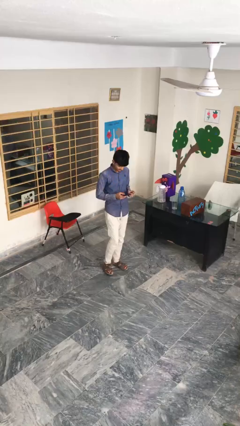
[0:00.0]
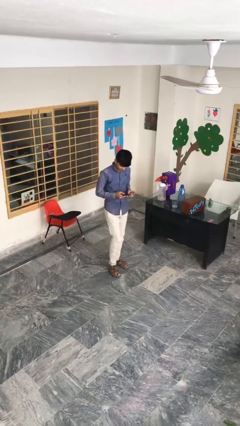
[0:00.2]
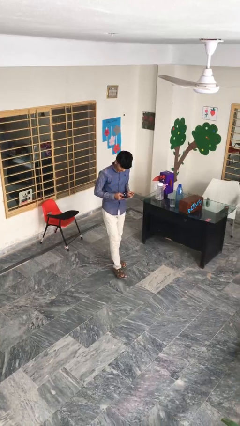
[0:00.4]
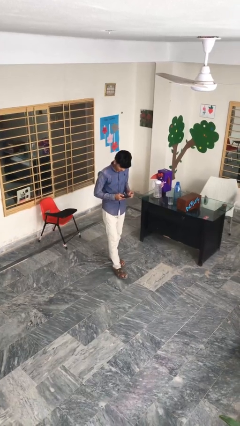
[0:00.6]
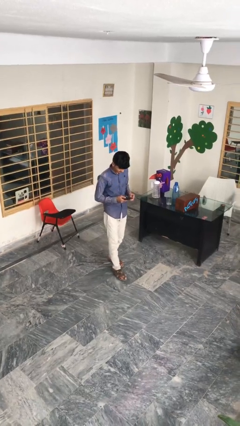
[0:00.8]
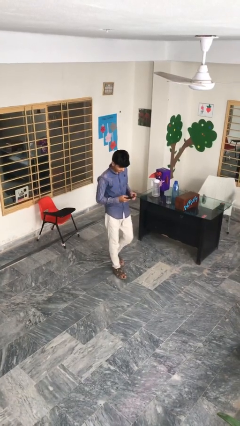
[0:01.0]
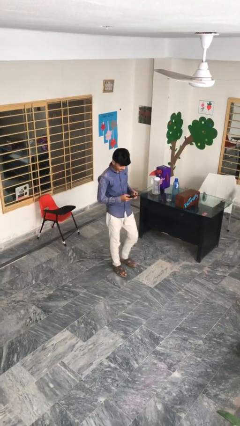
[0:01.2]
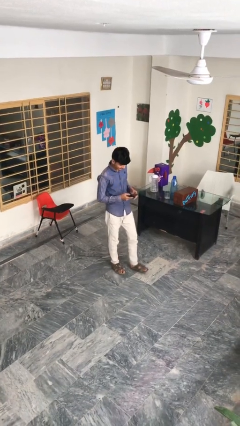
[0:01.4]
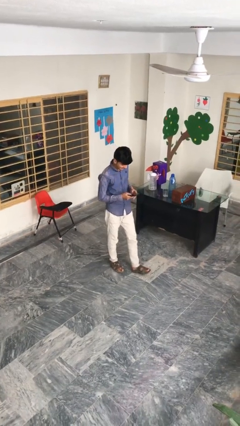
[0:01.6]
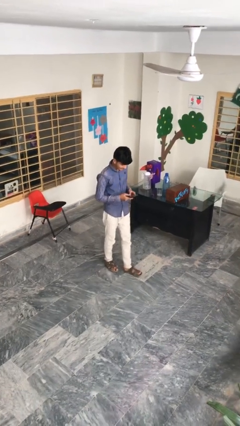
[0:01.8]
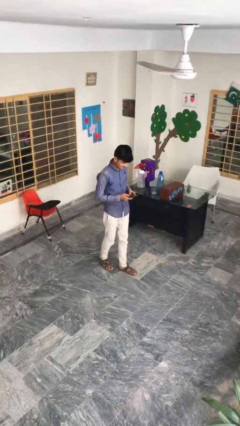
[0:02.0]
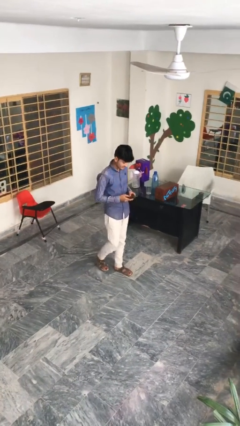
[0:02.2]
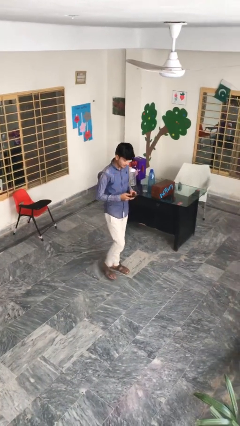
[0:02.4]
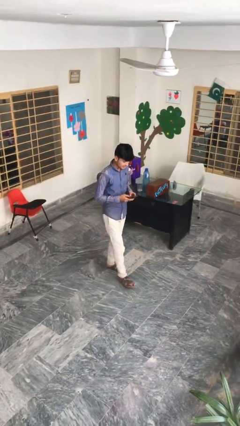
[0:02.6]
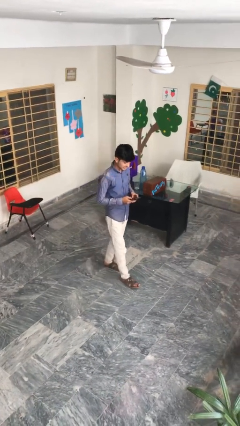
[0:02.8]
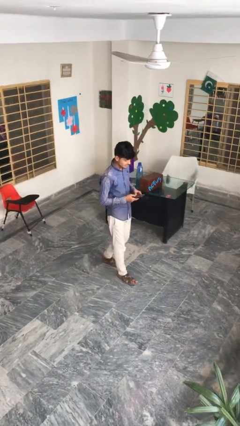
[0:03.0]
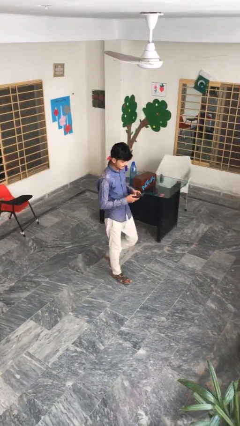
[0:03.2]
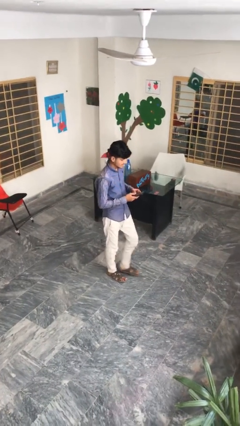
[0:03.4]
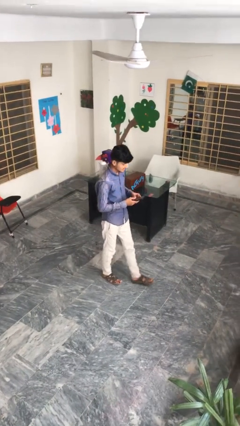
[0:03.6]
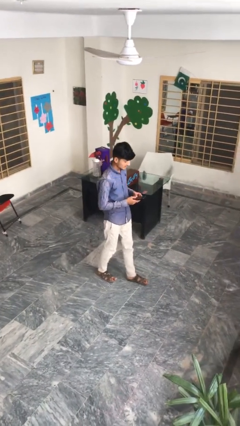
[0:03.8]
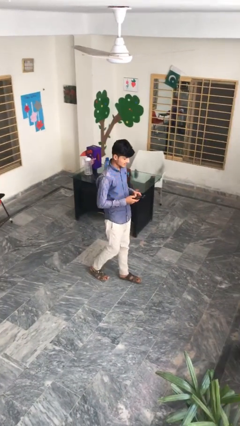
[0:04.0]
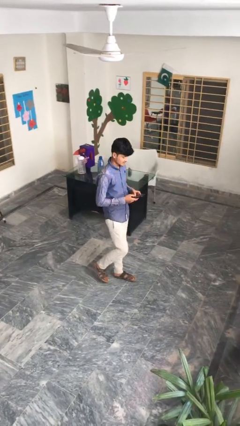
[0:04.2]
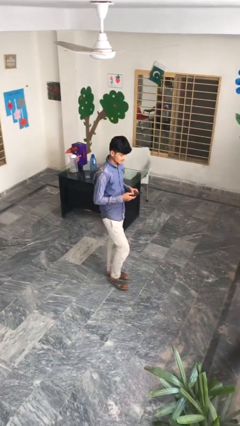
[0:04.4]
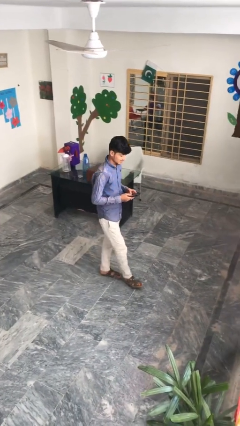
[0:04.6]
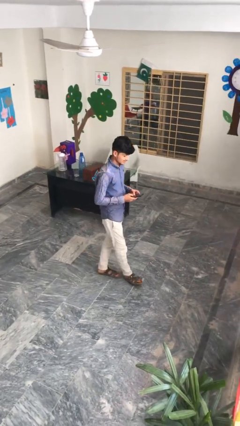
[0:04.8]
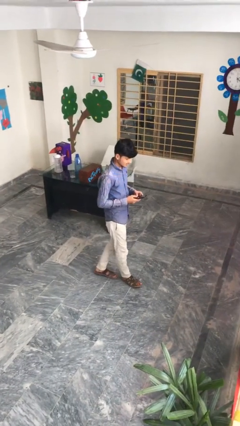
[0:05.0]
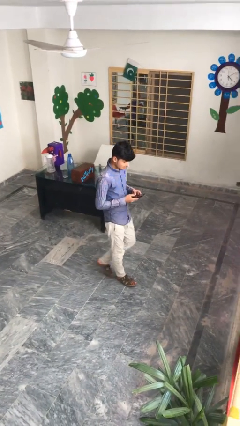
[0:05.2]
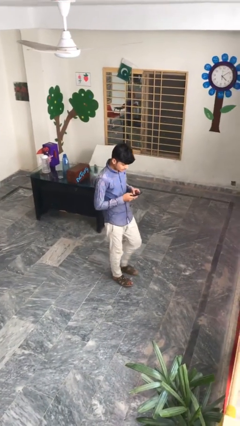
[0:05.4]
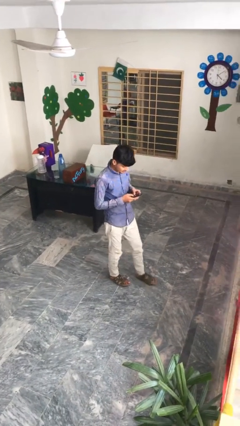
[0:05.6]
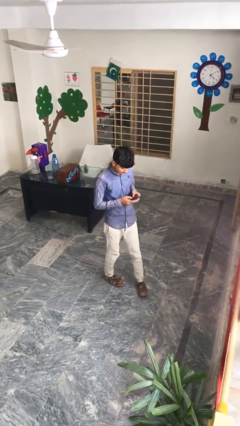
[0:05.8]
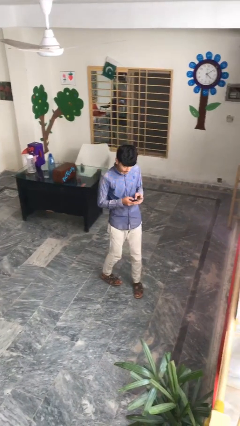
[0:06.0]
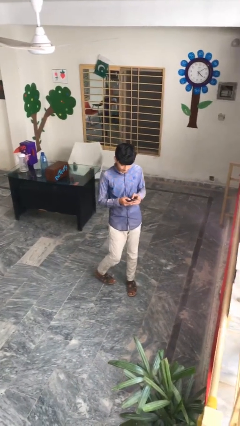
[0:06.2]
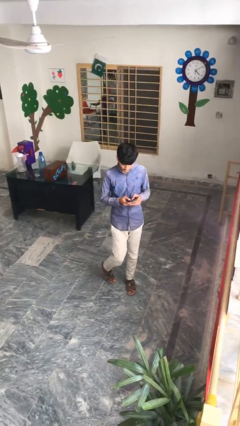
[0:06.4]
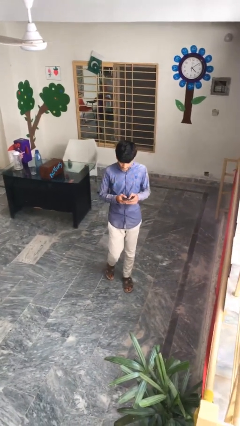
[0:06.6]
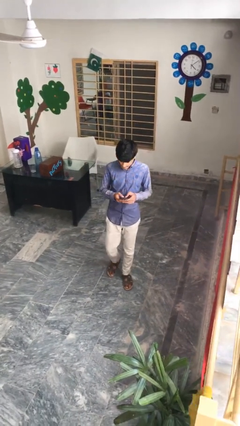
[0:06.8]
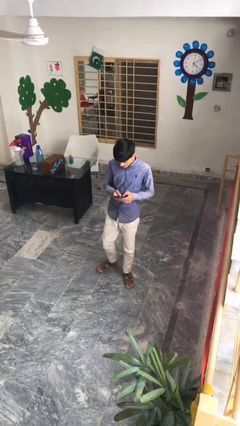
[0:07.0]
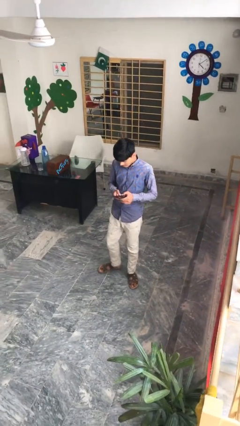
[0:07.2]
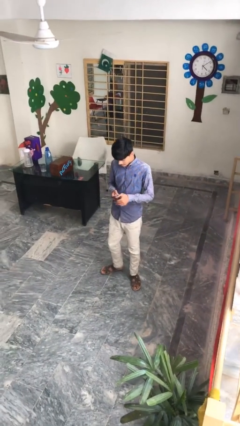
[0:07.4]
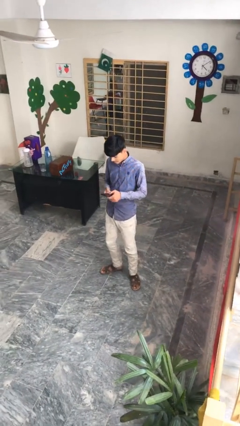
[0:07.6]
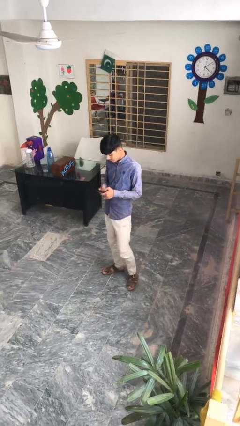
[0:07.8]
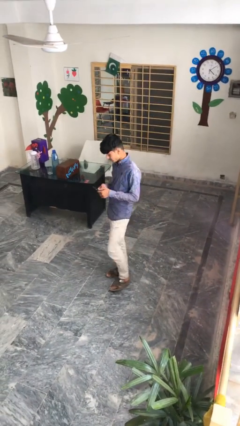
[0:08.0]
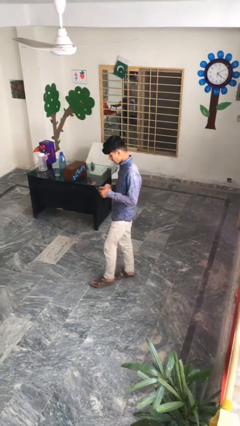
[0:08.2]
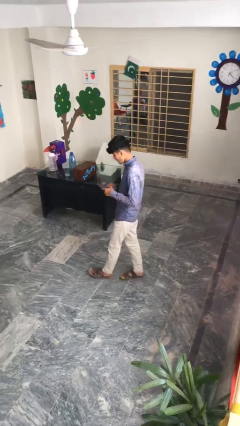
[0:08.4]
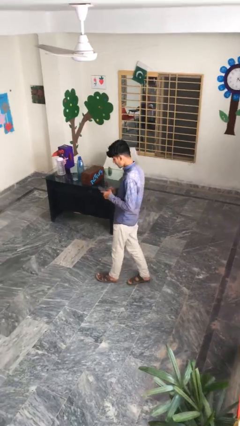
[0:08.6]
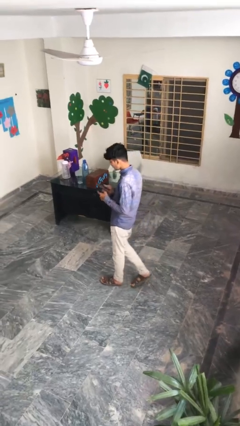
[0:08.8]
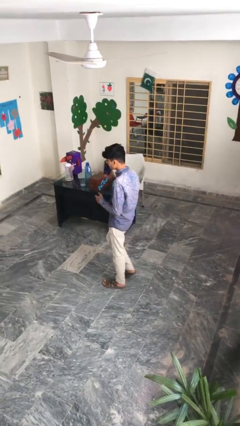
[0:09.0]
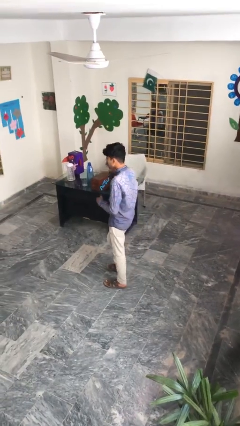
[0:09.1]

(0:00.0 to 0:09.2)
person texts on phone

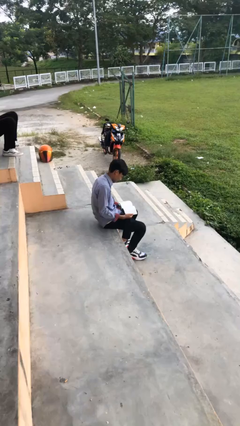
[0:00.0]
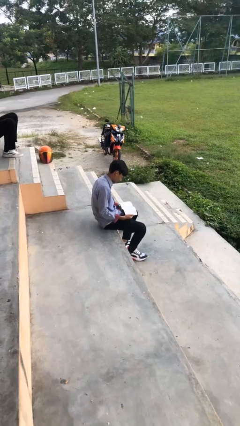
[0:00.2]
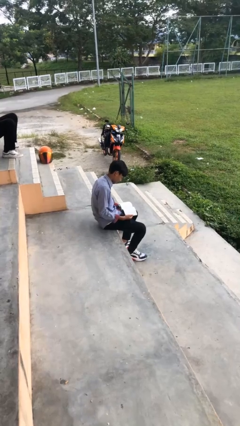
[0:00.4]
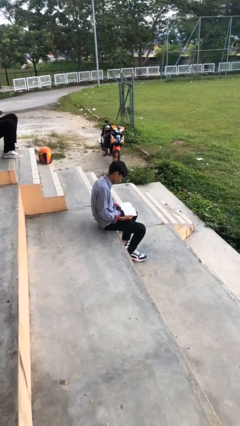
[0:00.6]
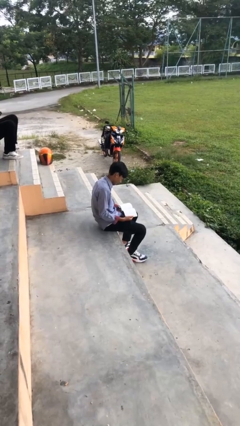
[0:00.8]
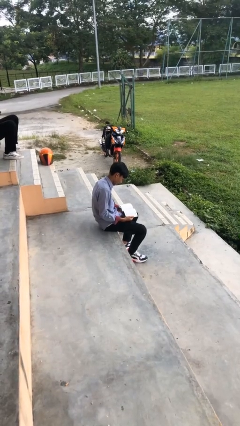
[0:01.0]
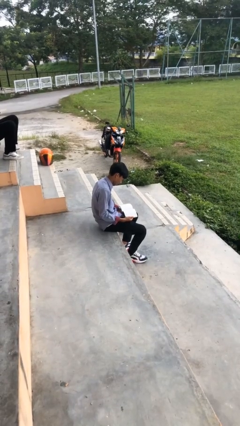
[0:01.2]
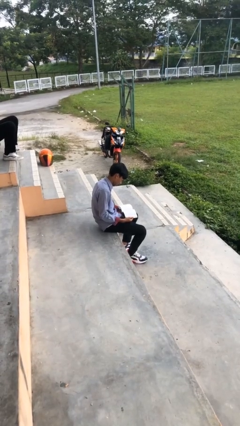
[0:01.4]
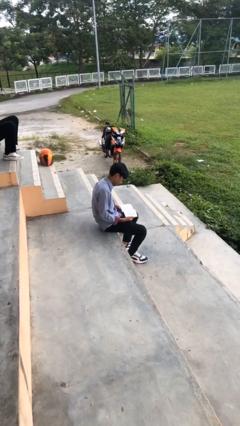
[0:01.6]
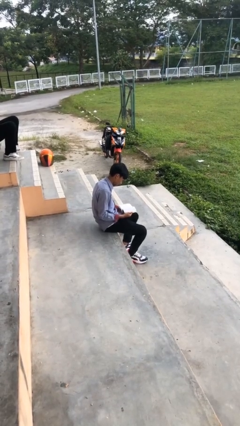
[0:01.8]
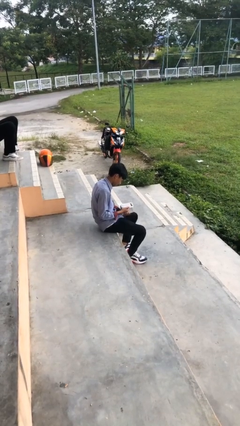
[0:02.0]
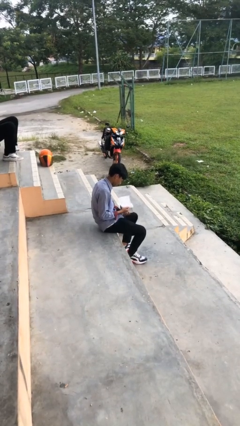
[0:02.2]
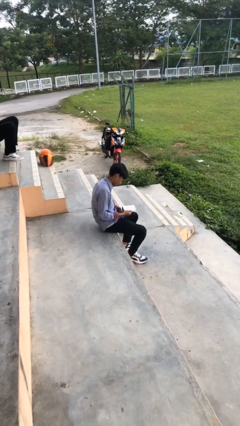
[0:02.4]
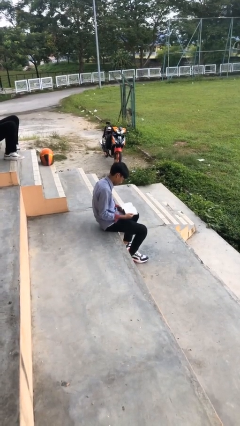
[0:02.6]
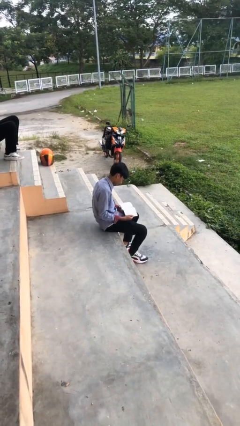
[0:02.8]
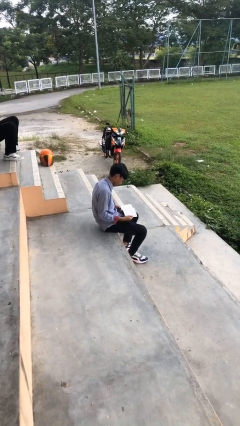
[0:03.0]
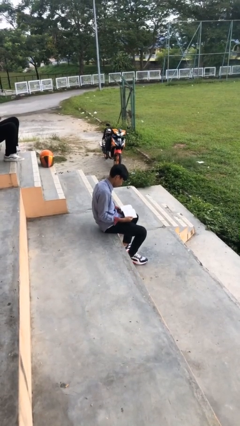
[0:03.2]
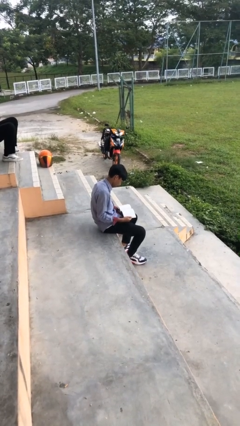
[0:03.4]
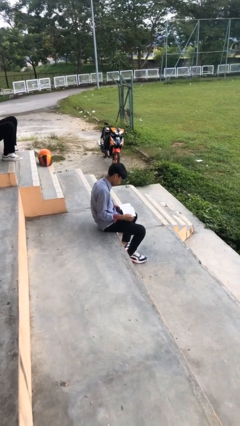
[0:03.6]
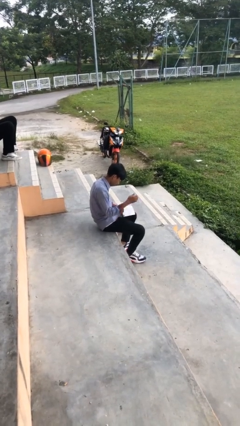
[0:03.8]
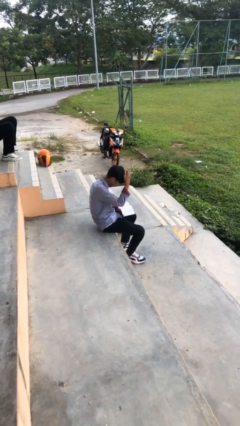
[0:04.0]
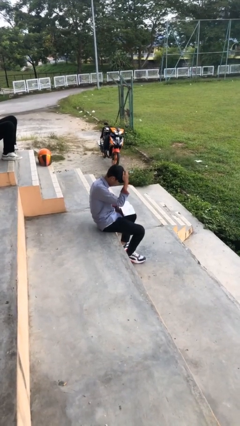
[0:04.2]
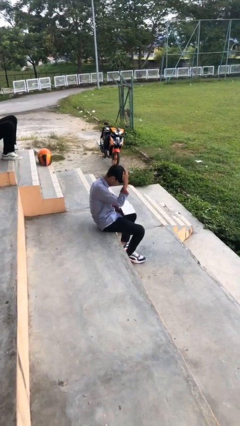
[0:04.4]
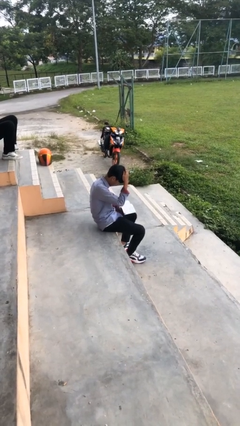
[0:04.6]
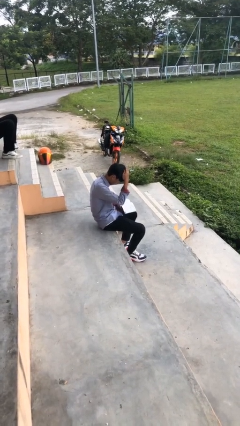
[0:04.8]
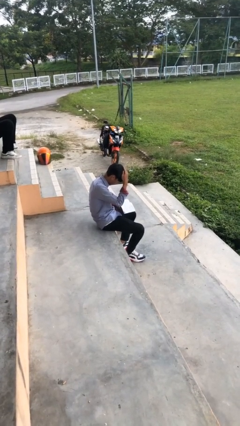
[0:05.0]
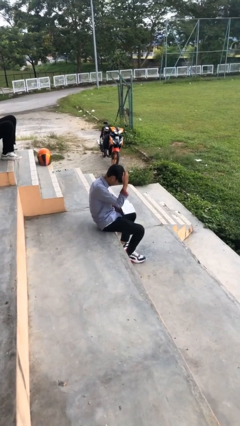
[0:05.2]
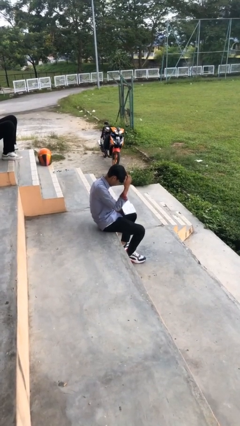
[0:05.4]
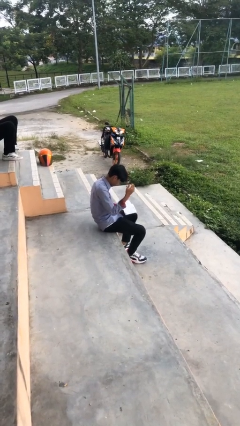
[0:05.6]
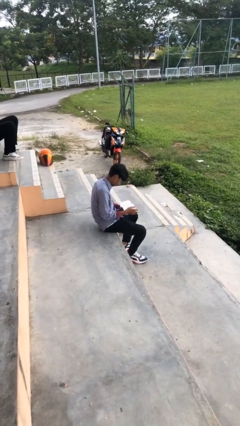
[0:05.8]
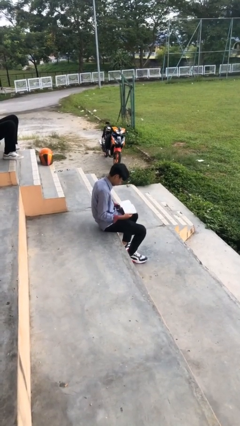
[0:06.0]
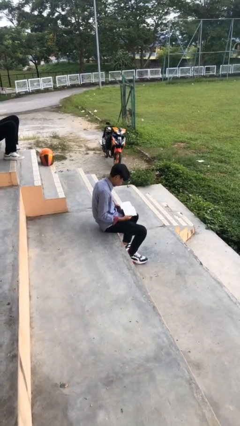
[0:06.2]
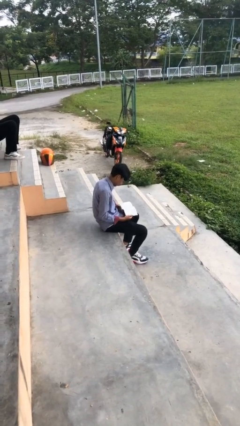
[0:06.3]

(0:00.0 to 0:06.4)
person reads document

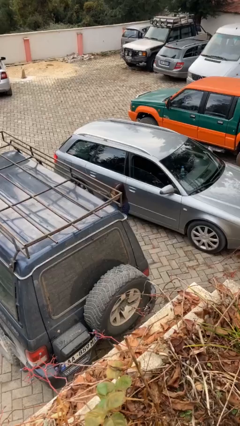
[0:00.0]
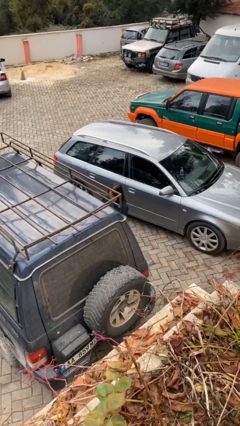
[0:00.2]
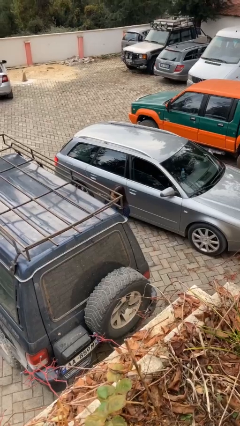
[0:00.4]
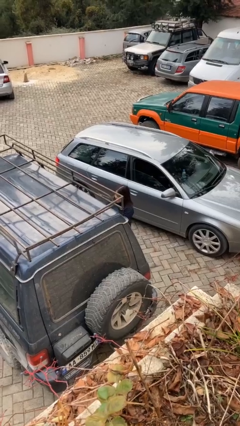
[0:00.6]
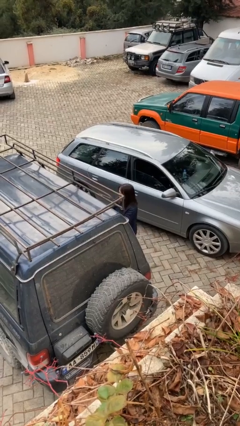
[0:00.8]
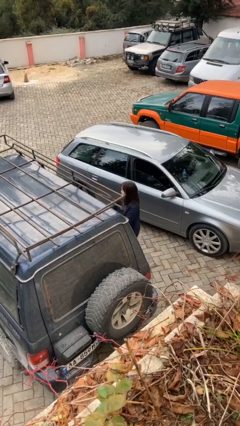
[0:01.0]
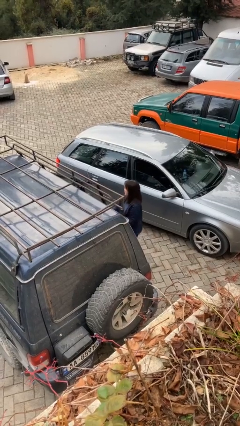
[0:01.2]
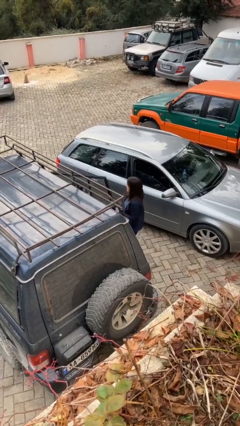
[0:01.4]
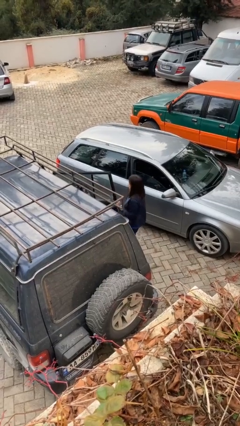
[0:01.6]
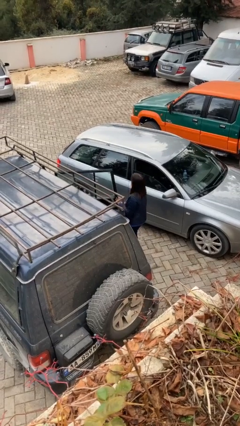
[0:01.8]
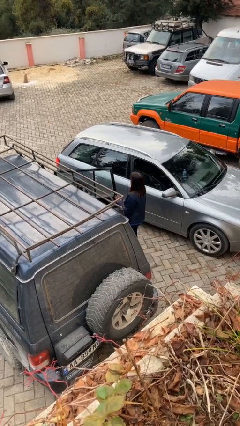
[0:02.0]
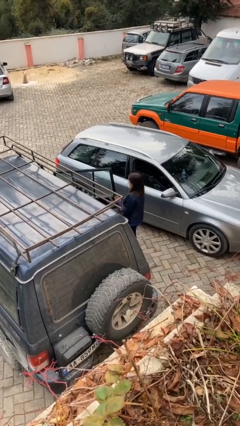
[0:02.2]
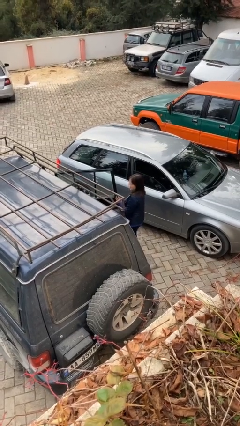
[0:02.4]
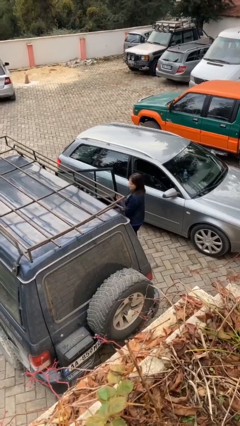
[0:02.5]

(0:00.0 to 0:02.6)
person opens car door
